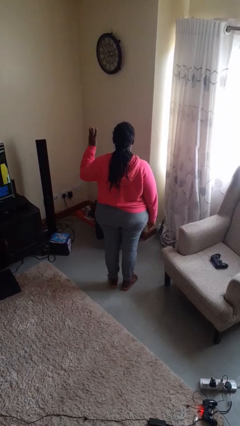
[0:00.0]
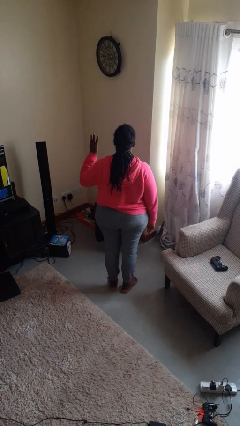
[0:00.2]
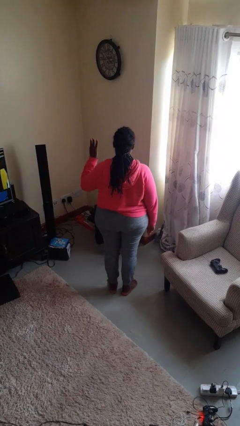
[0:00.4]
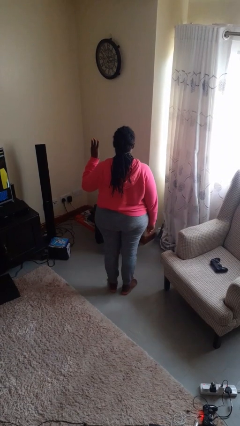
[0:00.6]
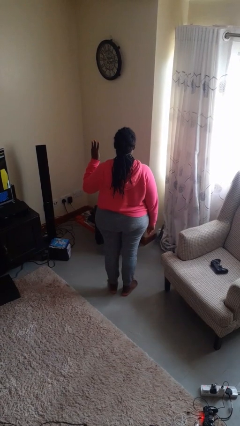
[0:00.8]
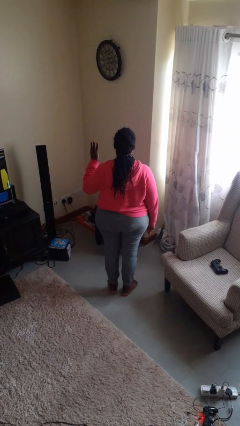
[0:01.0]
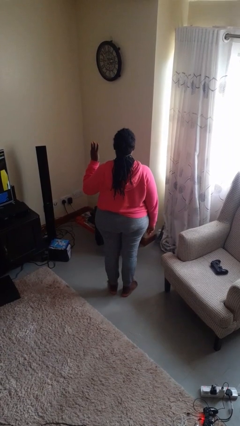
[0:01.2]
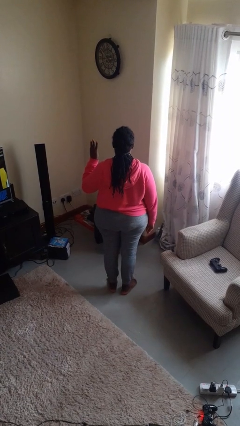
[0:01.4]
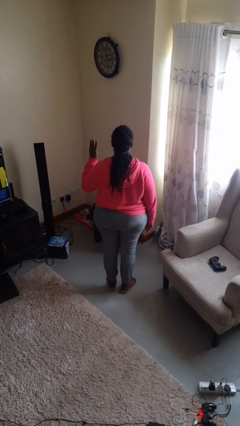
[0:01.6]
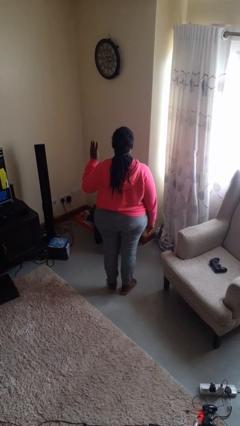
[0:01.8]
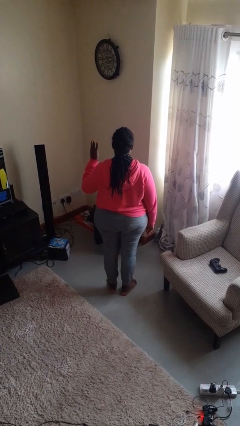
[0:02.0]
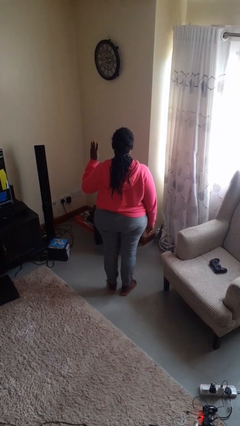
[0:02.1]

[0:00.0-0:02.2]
person gestures number three

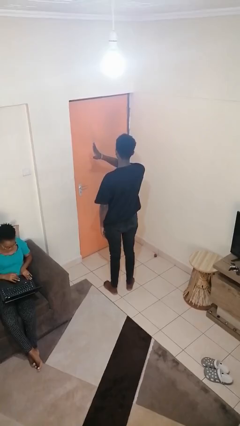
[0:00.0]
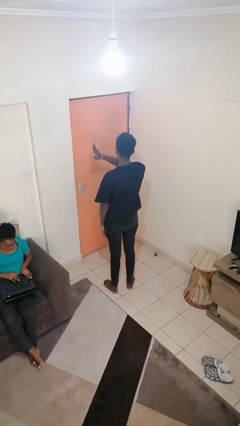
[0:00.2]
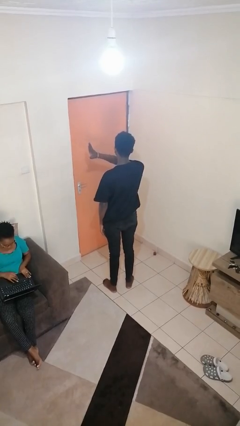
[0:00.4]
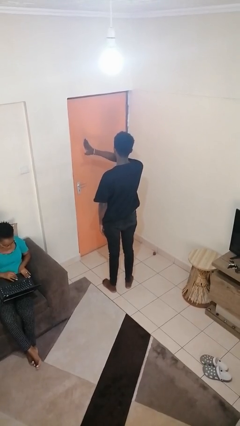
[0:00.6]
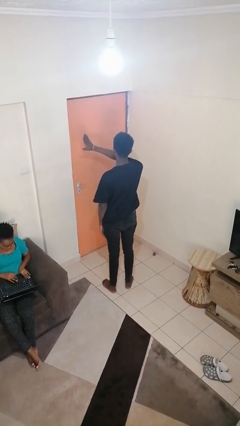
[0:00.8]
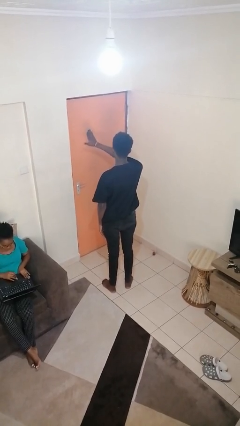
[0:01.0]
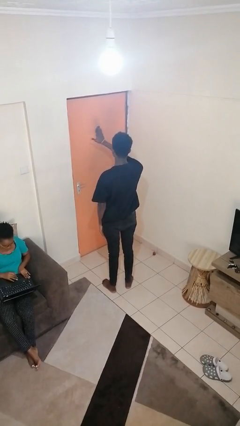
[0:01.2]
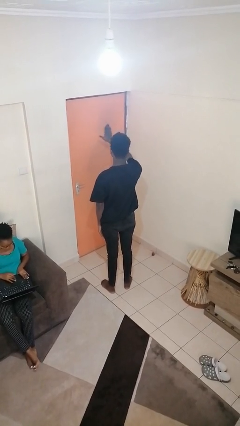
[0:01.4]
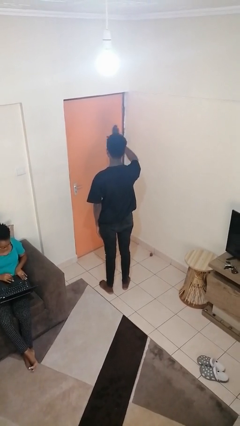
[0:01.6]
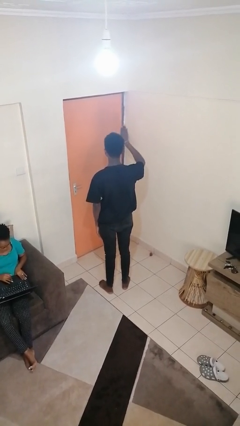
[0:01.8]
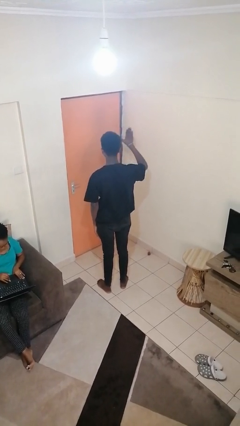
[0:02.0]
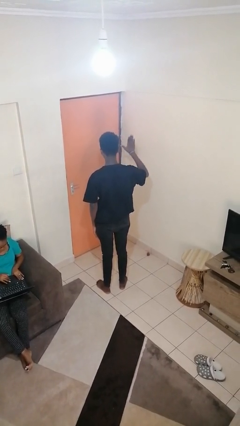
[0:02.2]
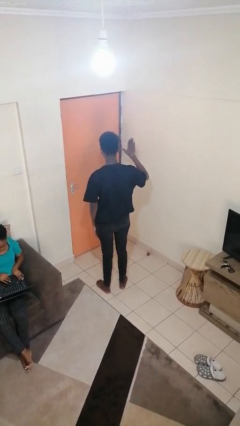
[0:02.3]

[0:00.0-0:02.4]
person gestures swipe right

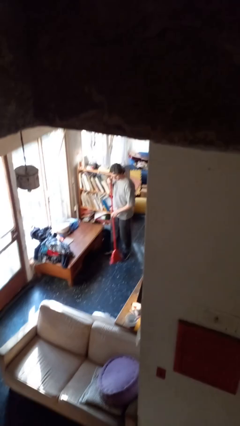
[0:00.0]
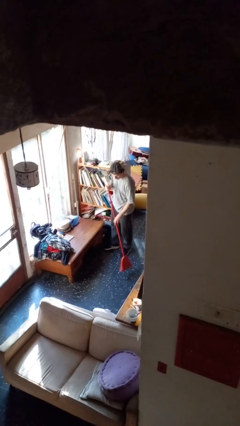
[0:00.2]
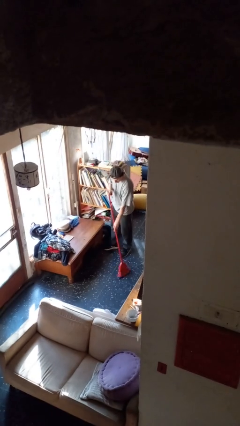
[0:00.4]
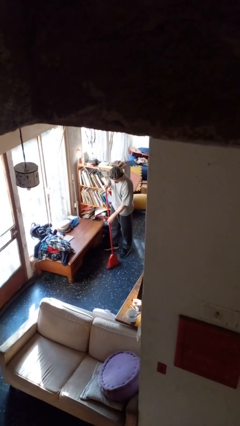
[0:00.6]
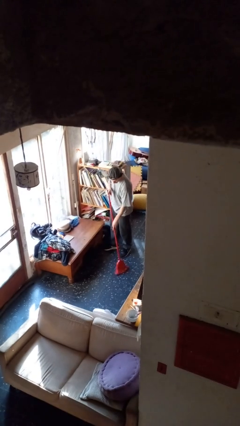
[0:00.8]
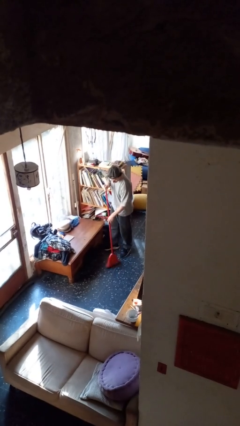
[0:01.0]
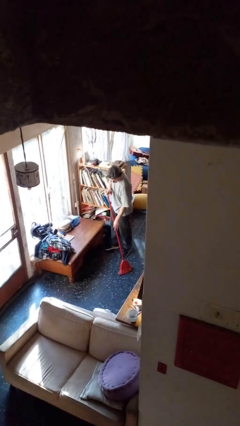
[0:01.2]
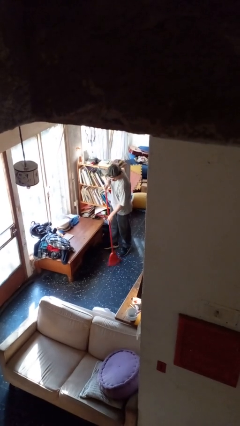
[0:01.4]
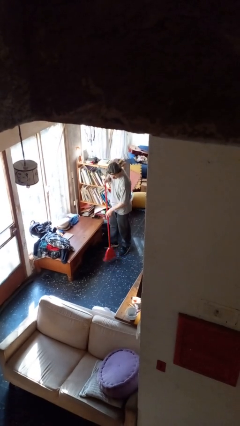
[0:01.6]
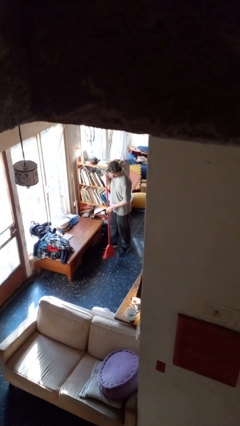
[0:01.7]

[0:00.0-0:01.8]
person sweeps floor

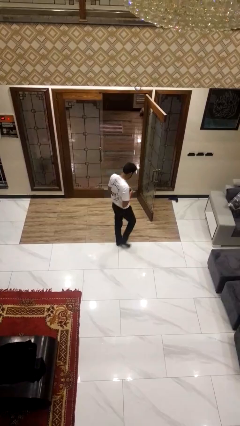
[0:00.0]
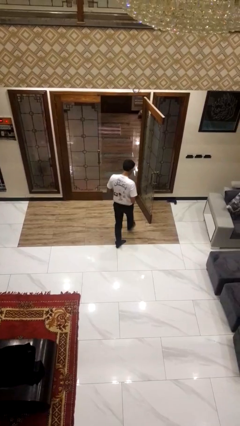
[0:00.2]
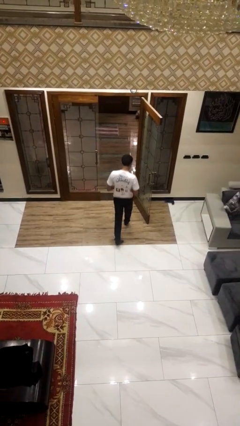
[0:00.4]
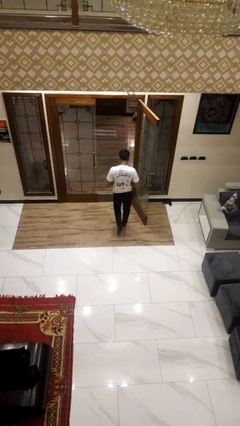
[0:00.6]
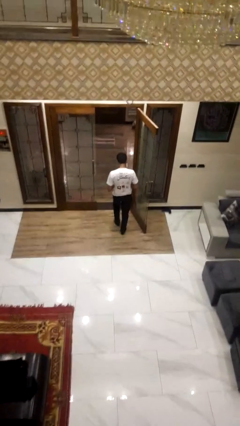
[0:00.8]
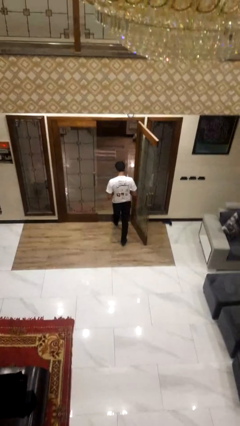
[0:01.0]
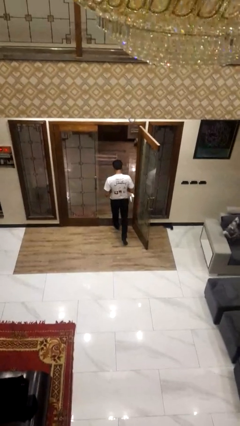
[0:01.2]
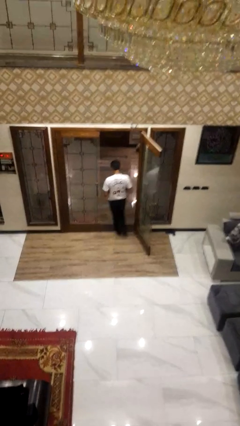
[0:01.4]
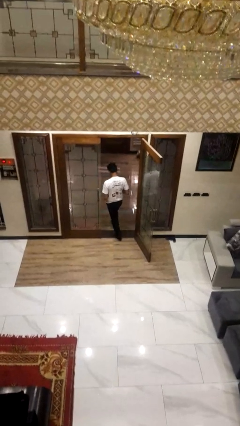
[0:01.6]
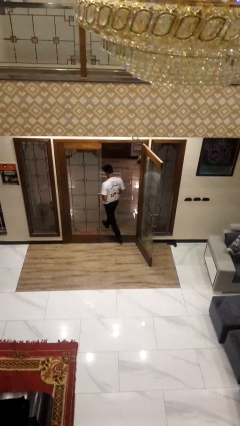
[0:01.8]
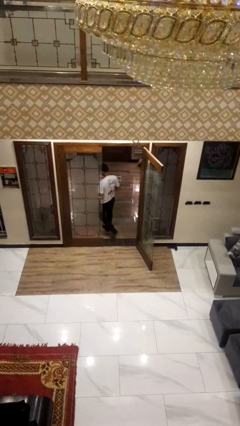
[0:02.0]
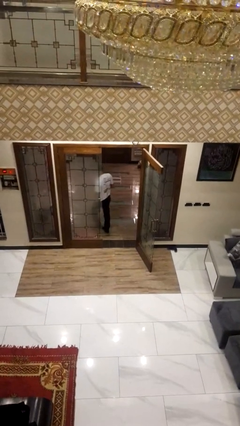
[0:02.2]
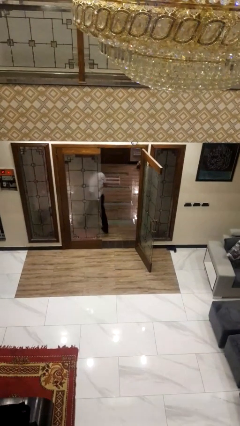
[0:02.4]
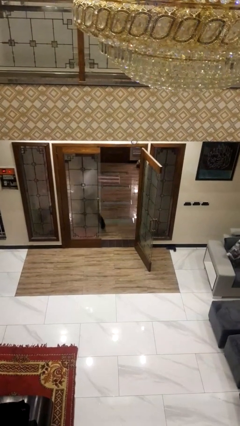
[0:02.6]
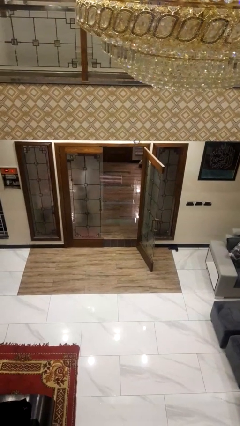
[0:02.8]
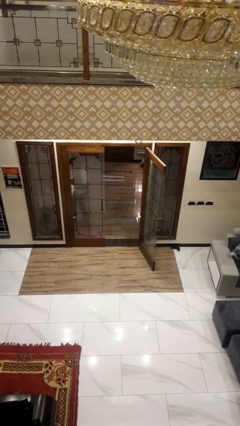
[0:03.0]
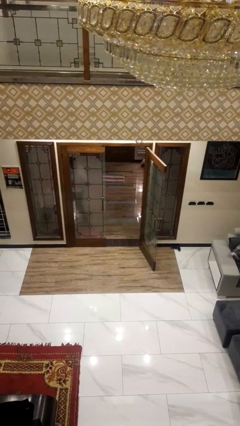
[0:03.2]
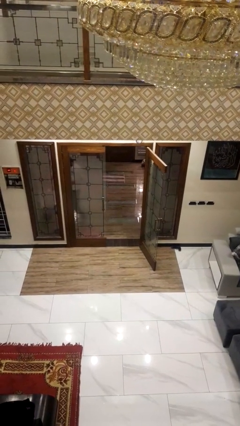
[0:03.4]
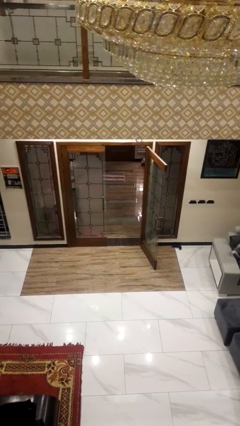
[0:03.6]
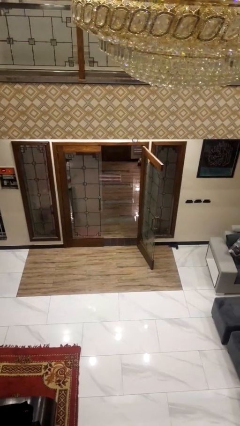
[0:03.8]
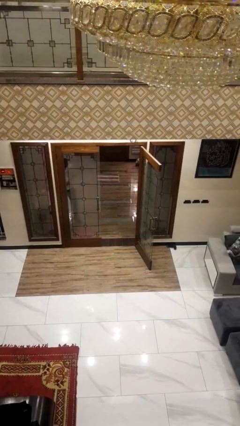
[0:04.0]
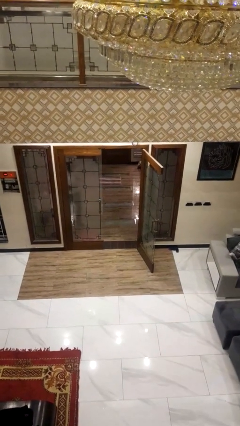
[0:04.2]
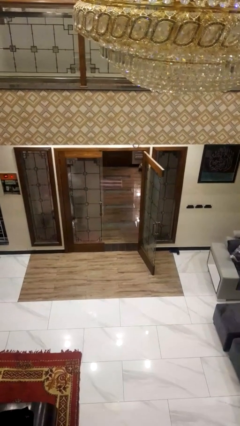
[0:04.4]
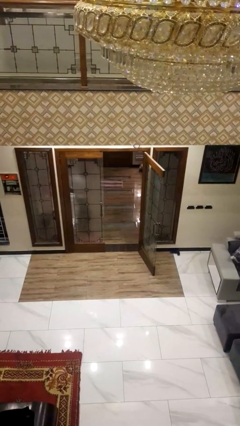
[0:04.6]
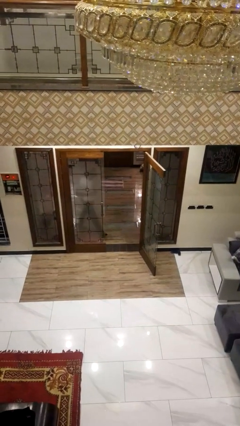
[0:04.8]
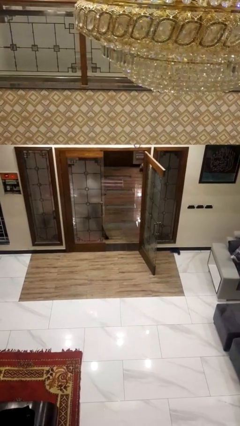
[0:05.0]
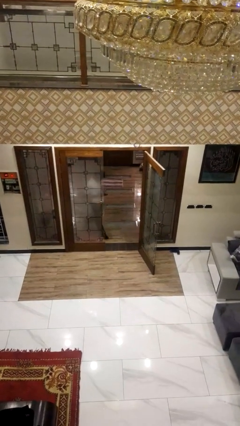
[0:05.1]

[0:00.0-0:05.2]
person exits scene through structure

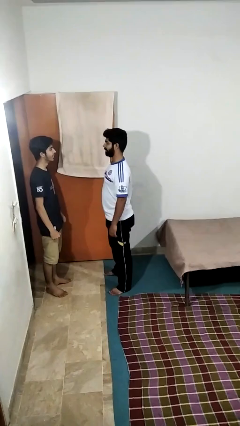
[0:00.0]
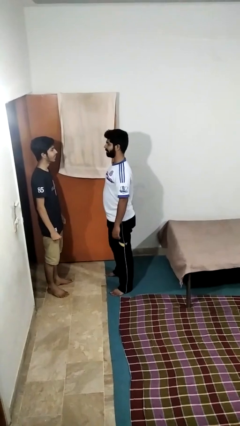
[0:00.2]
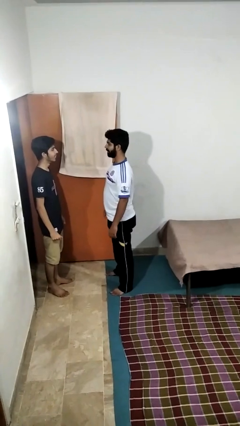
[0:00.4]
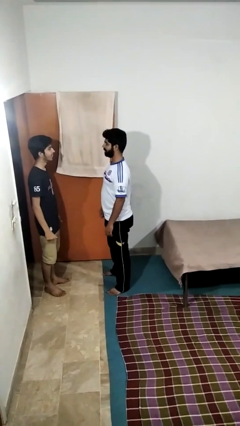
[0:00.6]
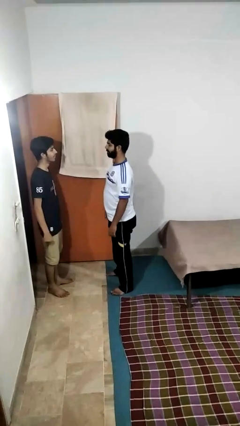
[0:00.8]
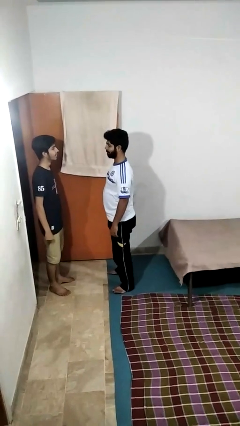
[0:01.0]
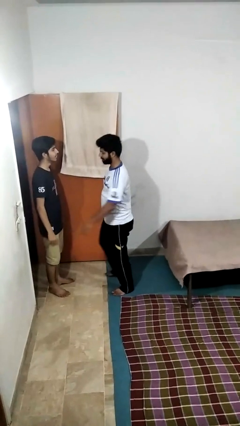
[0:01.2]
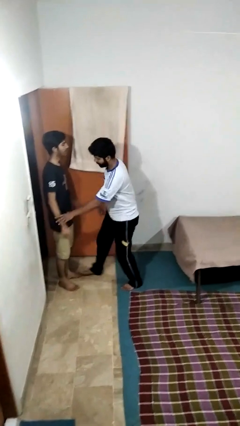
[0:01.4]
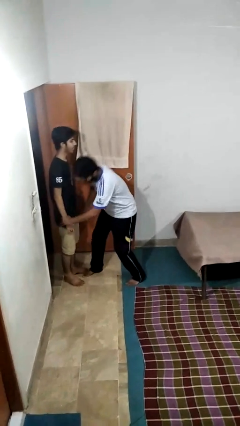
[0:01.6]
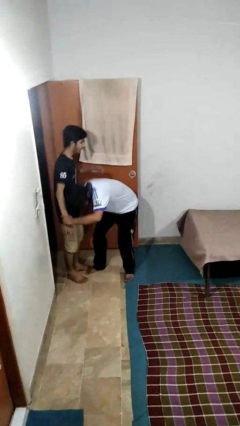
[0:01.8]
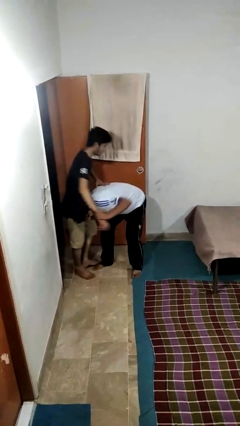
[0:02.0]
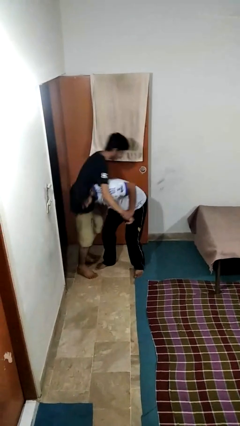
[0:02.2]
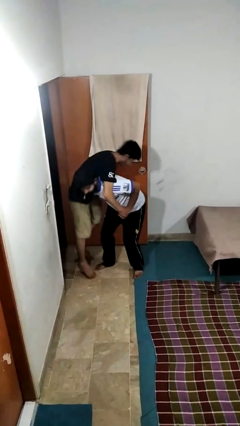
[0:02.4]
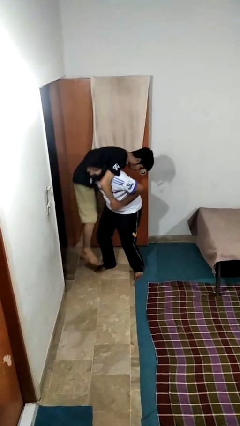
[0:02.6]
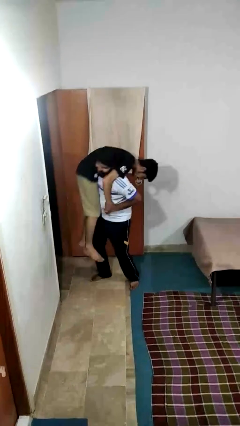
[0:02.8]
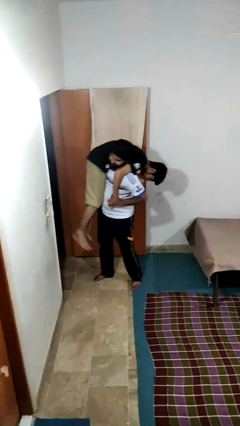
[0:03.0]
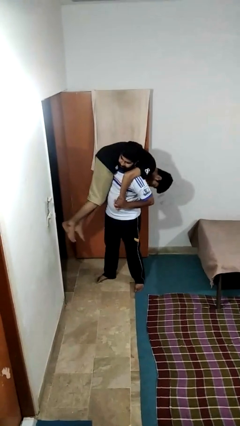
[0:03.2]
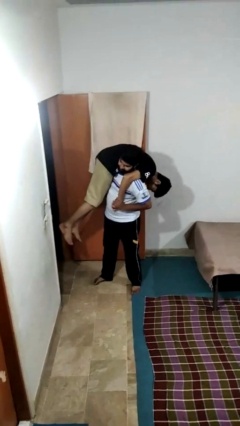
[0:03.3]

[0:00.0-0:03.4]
person carries person over shoulder

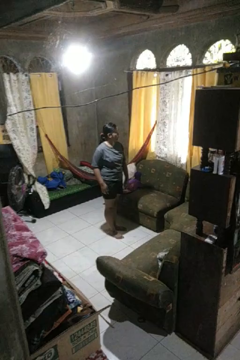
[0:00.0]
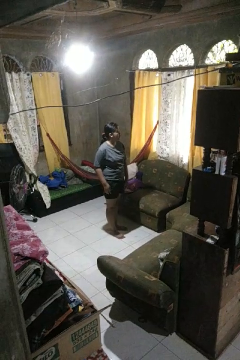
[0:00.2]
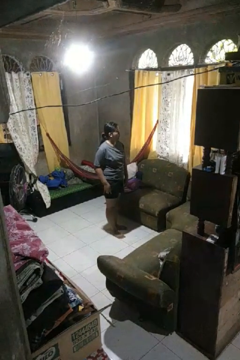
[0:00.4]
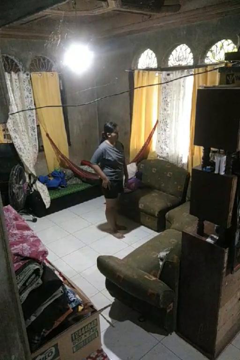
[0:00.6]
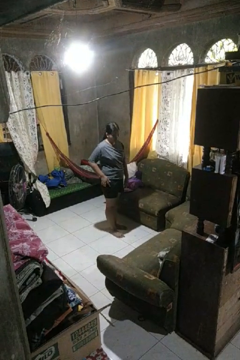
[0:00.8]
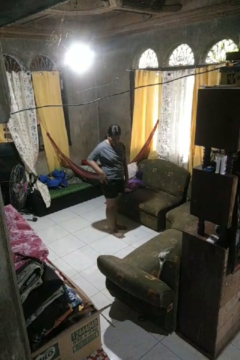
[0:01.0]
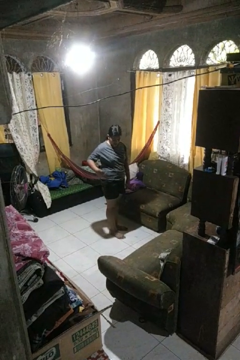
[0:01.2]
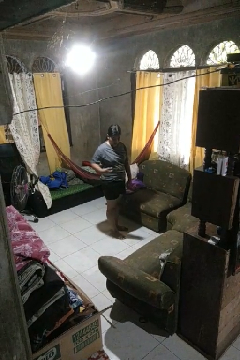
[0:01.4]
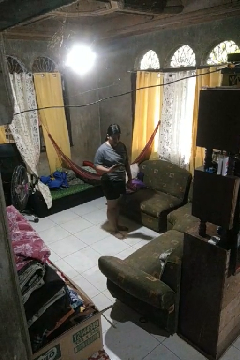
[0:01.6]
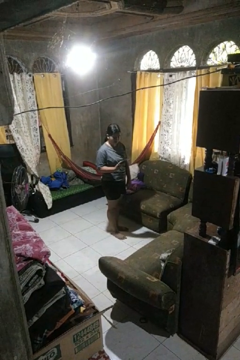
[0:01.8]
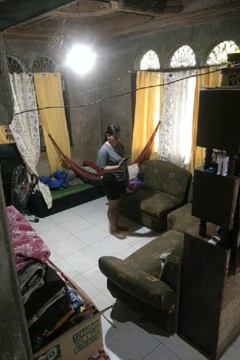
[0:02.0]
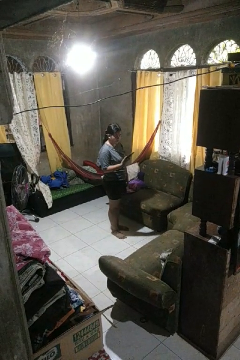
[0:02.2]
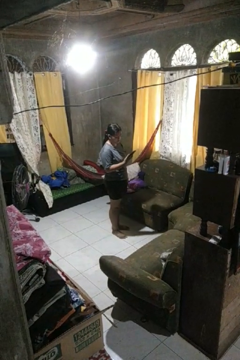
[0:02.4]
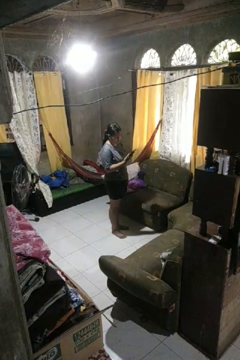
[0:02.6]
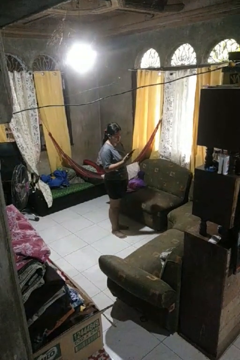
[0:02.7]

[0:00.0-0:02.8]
person takes phone from pocket
